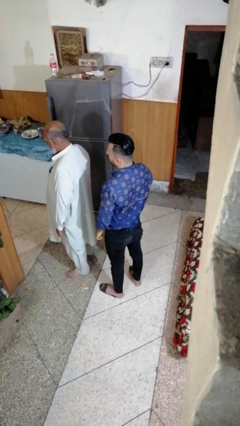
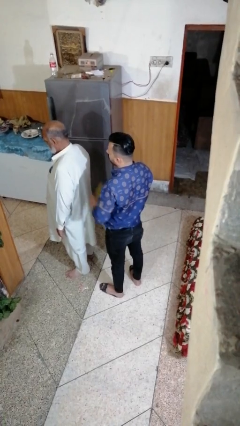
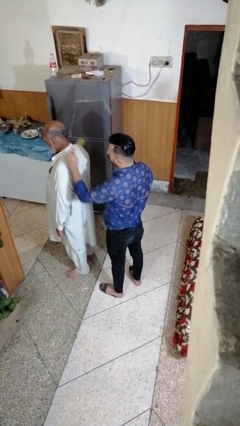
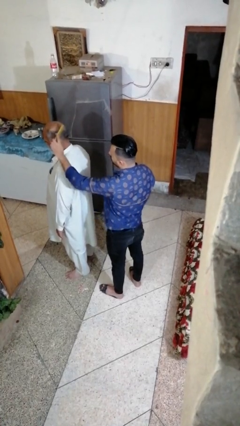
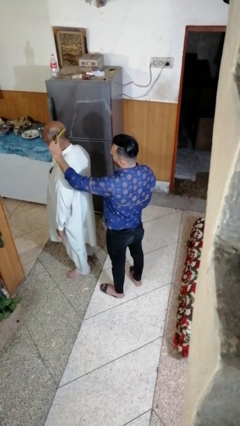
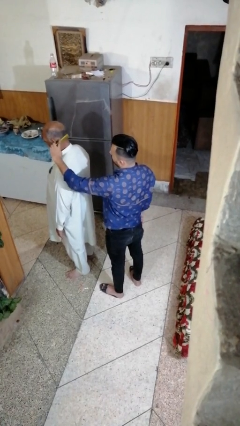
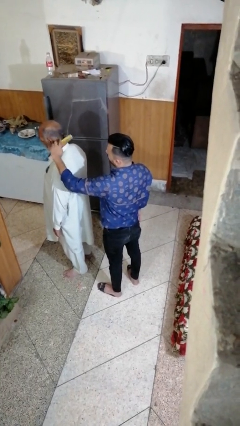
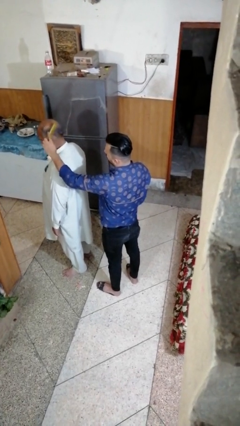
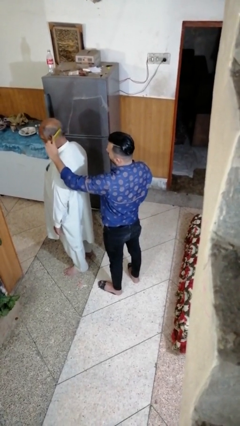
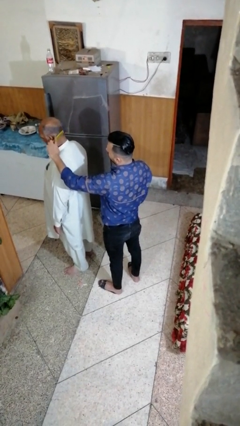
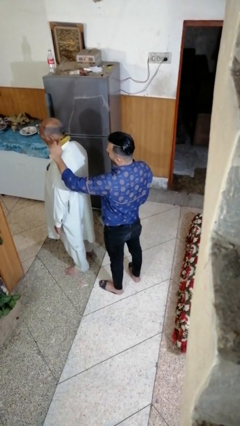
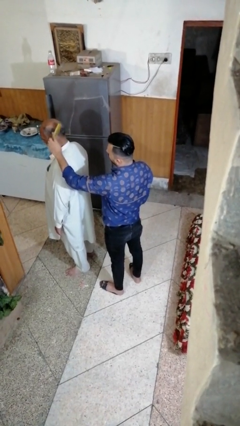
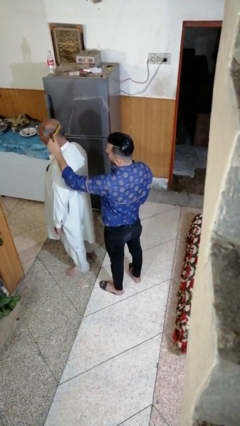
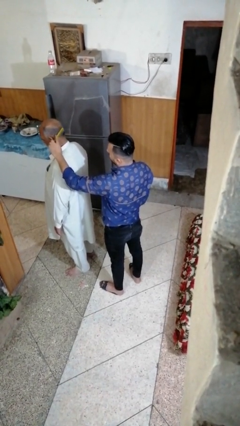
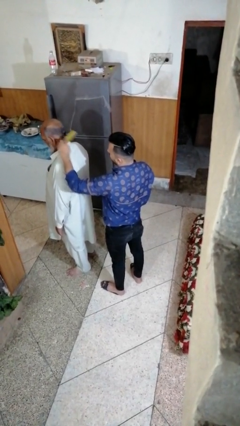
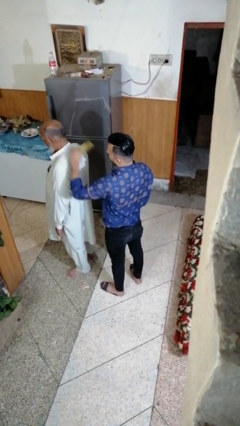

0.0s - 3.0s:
person brushes hair of person

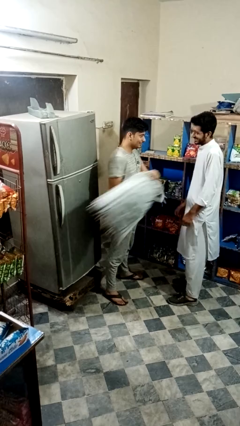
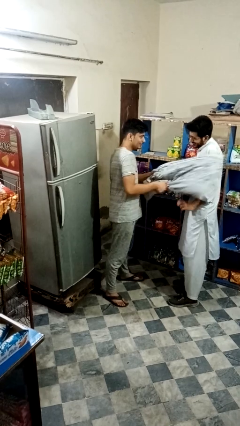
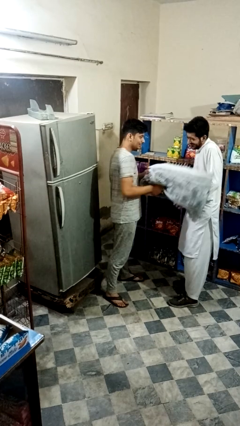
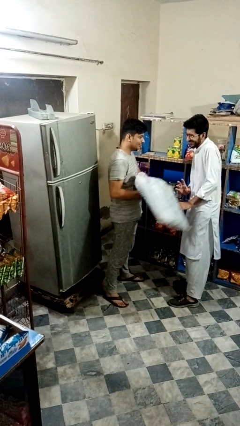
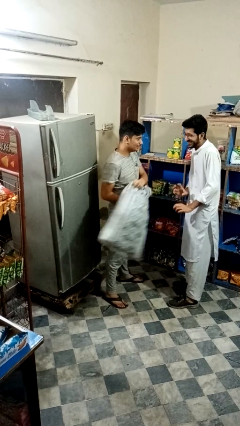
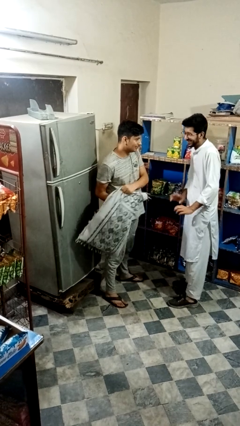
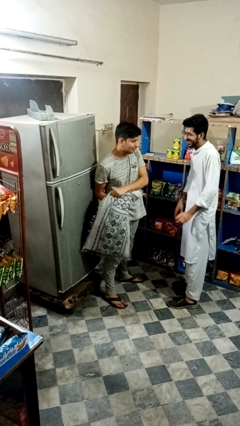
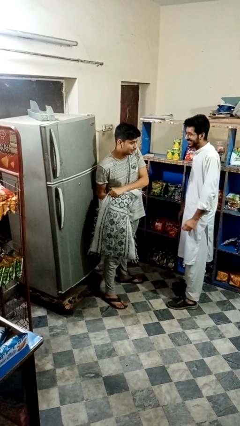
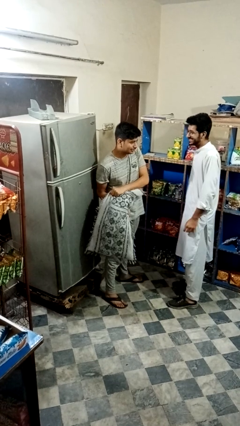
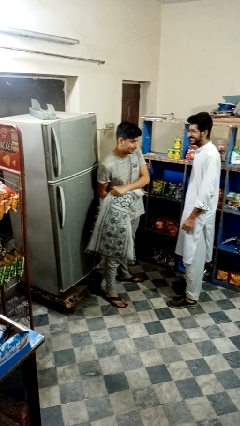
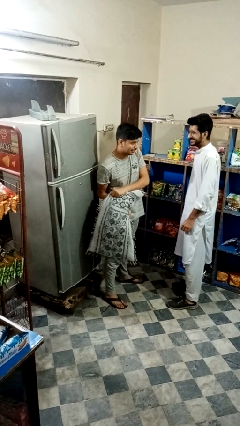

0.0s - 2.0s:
person hits person with pillow

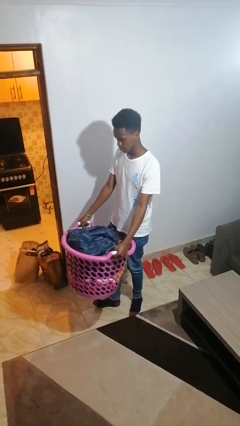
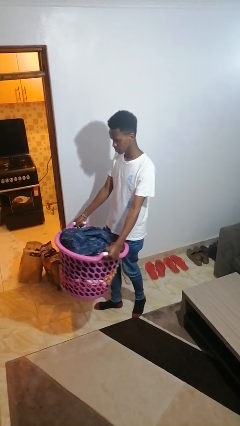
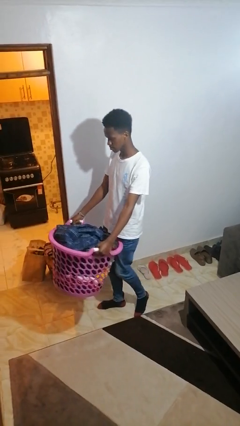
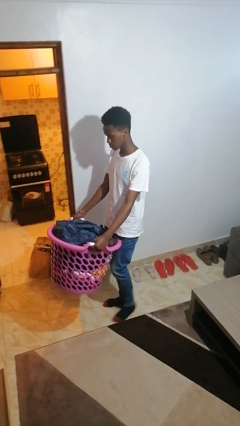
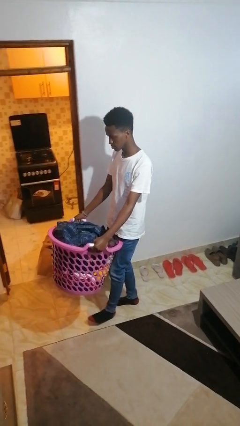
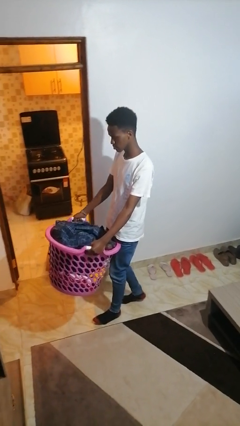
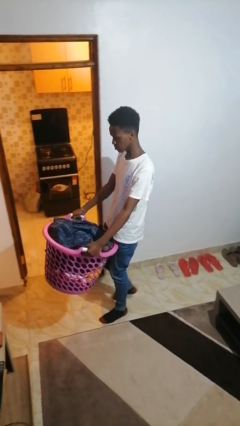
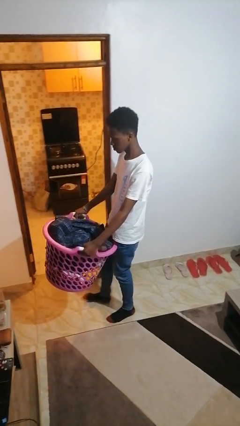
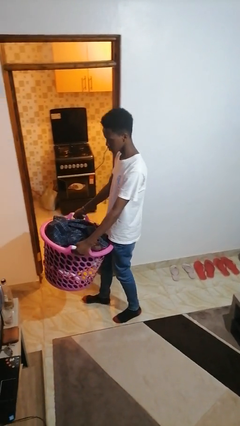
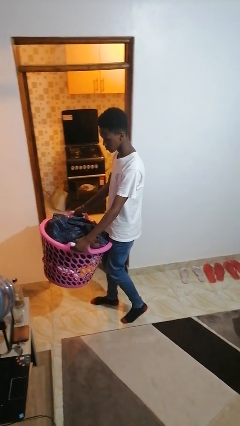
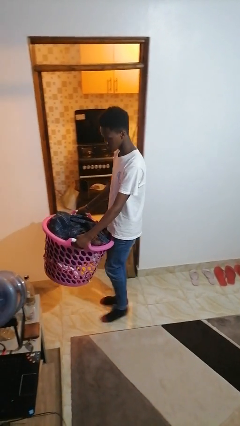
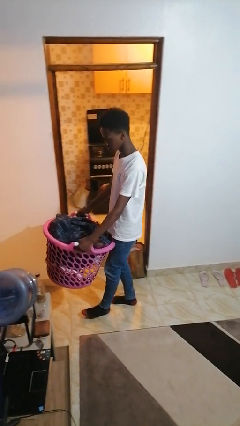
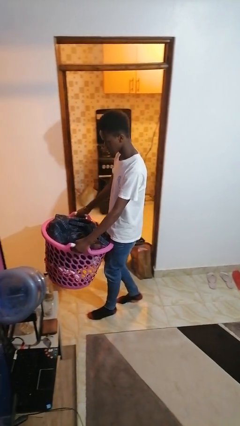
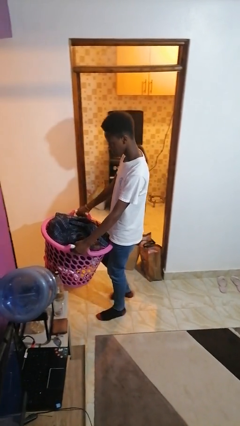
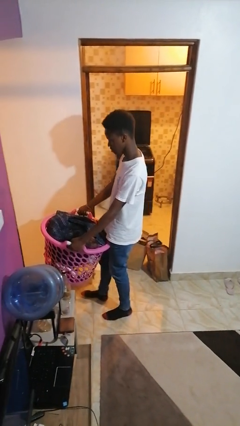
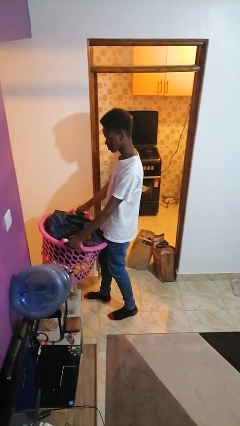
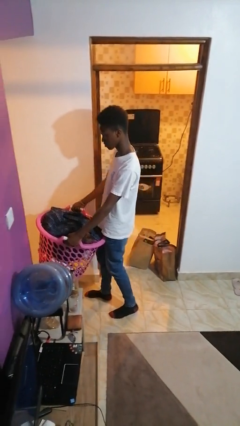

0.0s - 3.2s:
person carries laundry basket

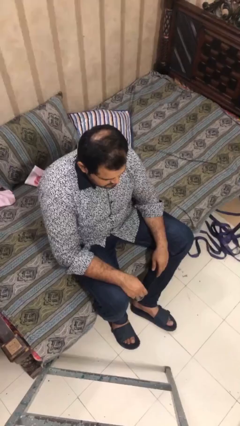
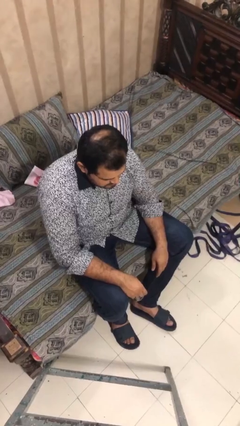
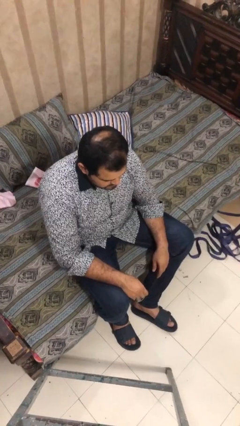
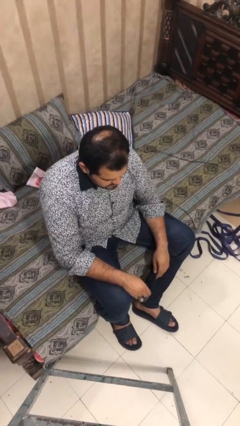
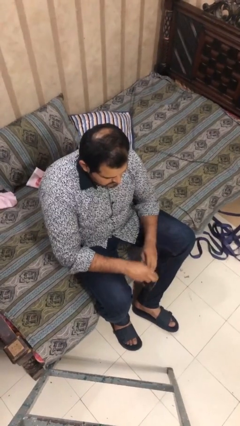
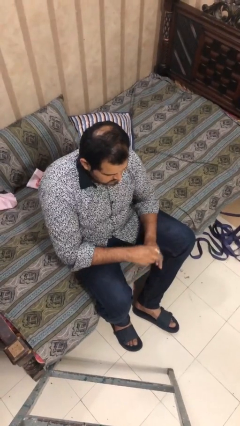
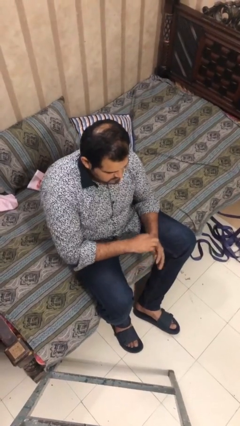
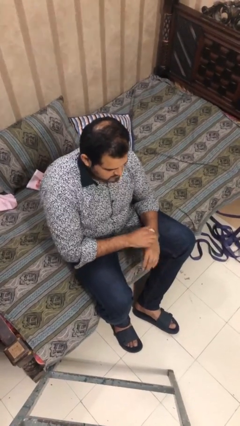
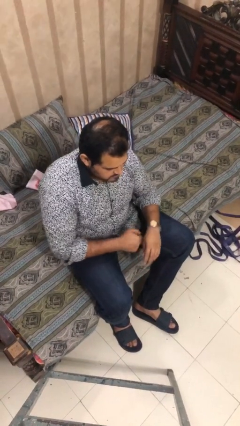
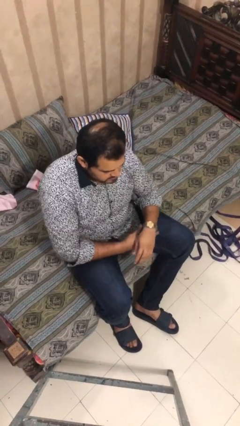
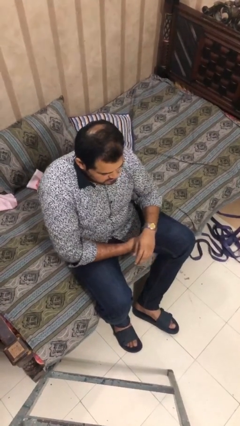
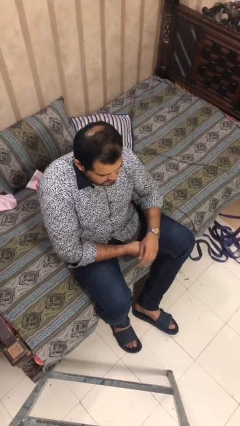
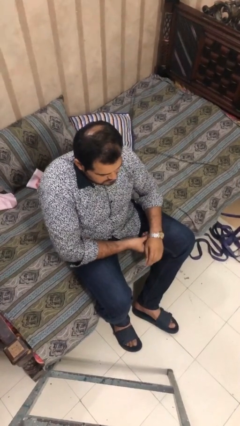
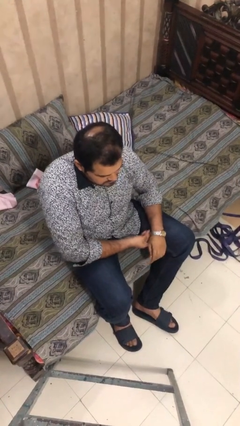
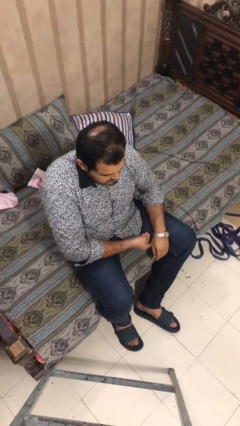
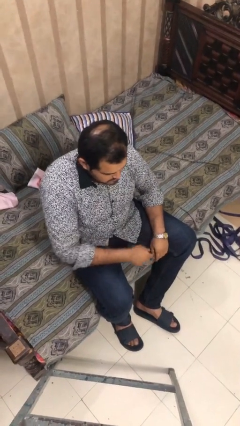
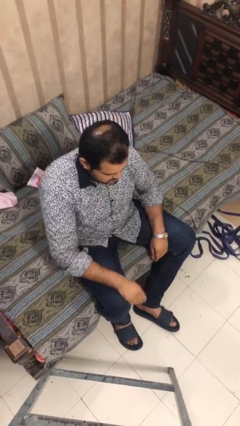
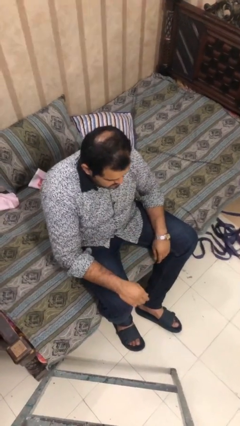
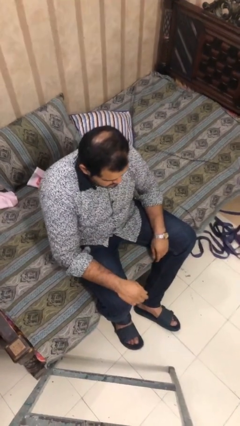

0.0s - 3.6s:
person puts on wristwatch

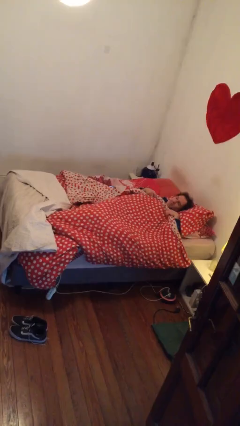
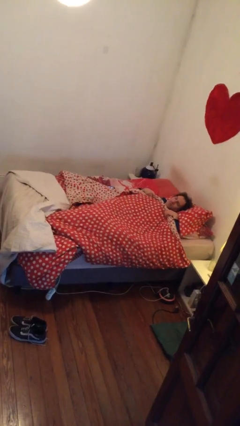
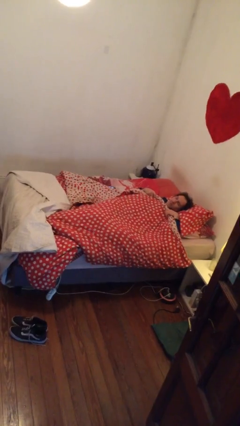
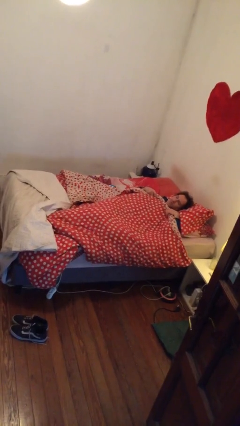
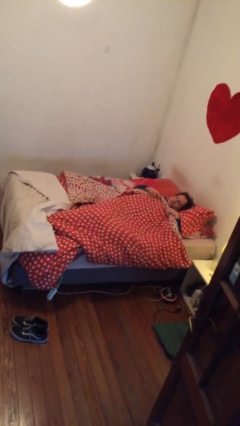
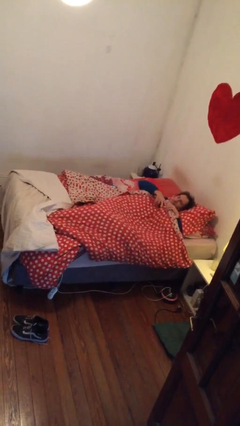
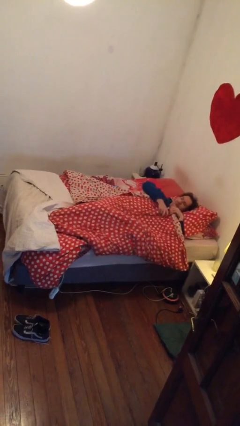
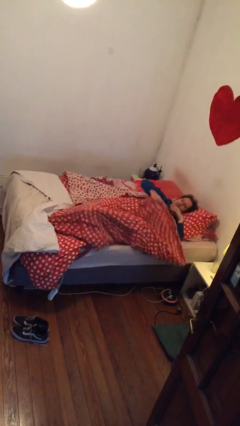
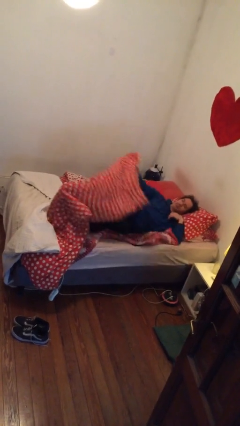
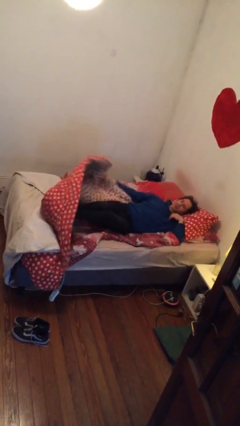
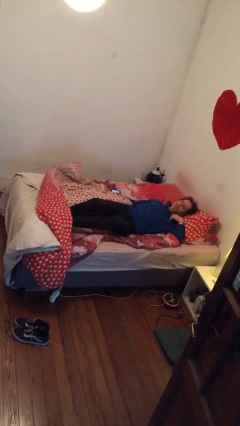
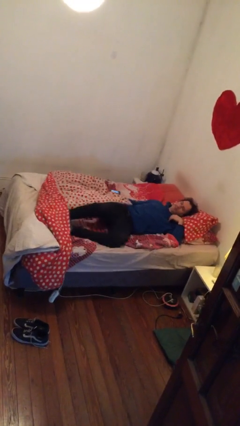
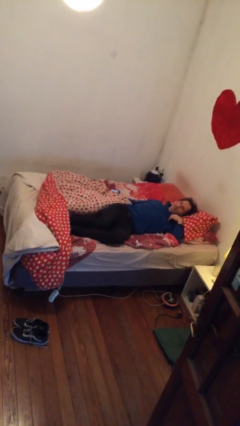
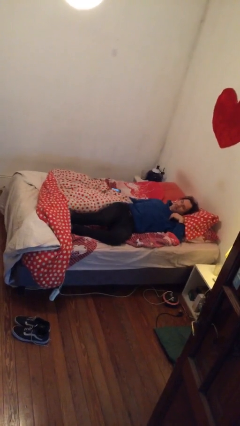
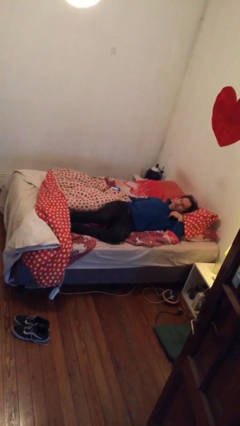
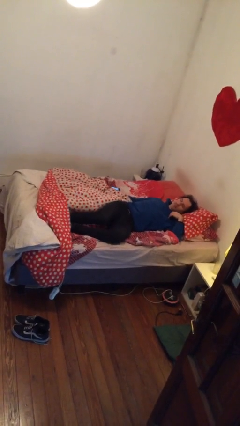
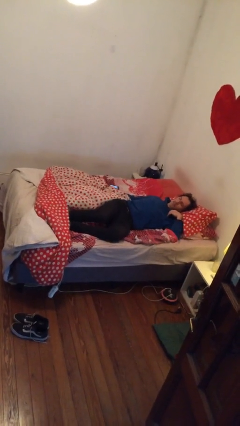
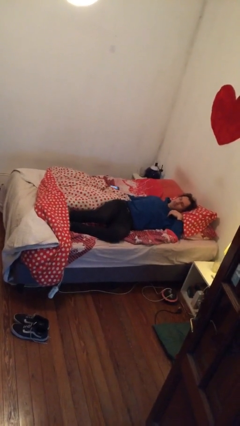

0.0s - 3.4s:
person uncovers with bedsheets

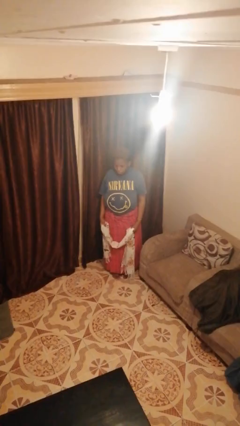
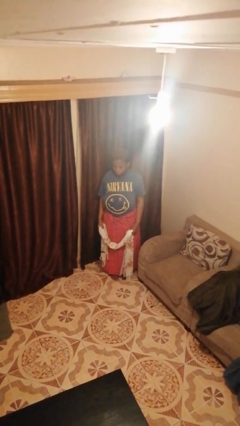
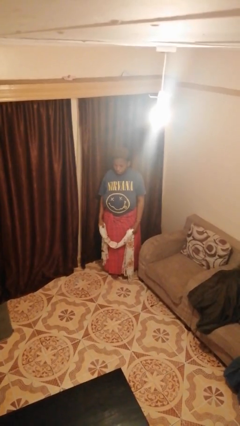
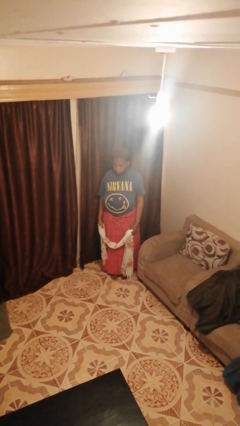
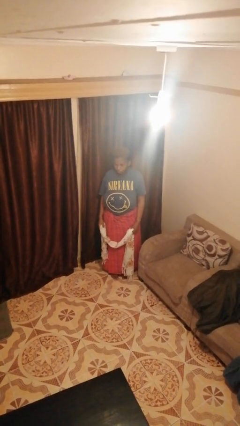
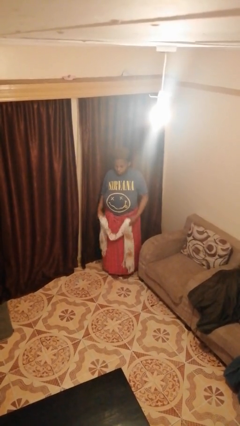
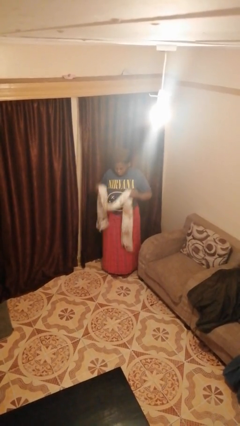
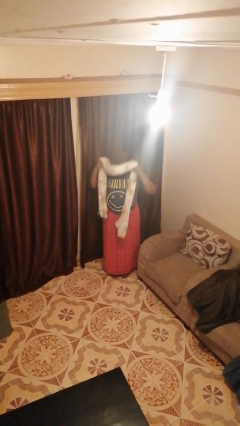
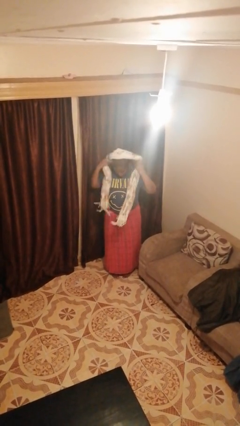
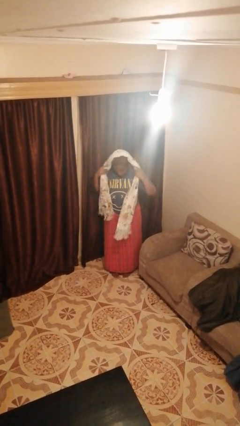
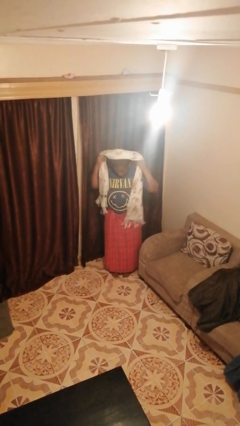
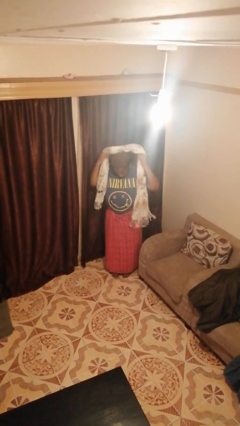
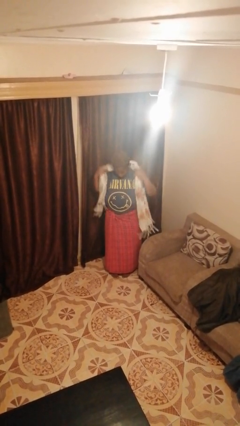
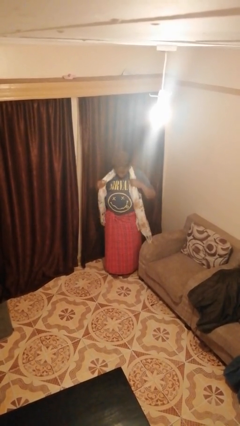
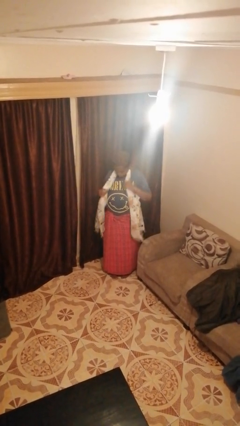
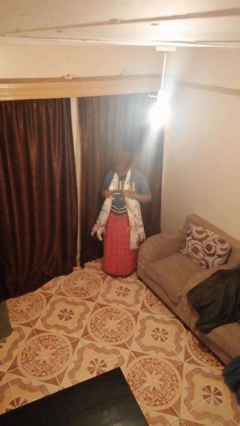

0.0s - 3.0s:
person puts on scarf
